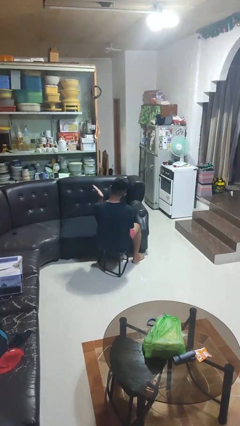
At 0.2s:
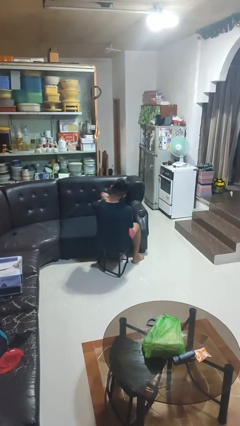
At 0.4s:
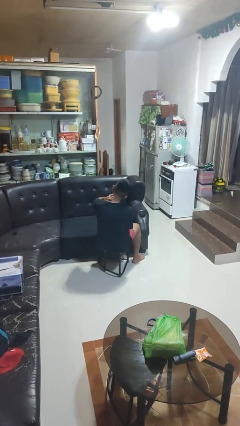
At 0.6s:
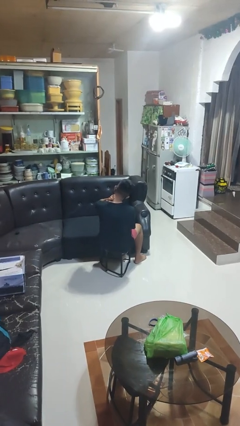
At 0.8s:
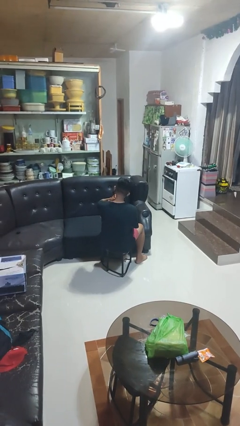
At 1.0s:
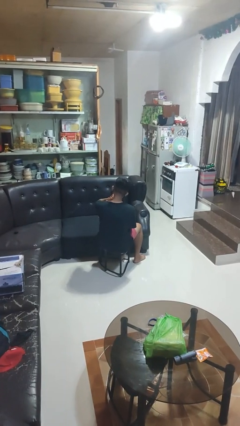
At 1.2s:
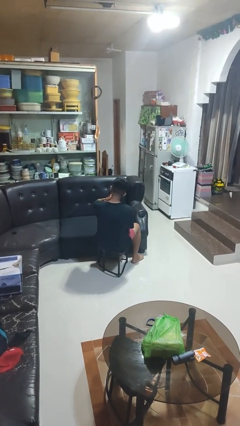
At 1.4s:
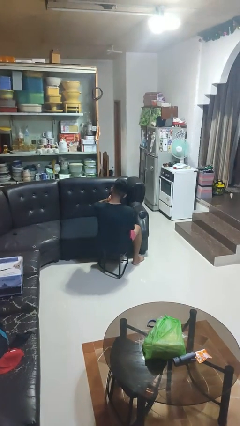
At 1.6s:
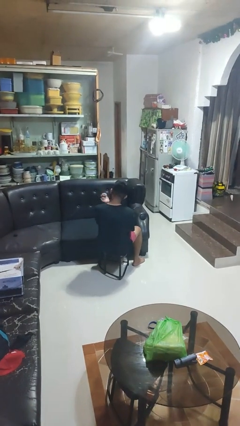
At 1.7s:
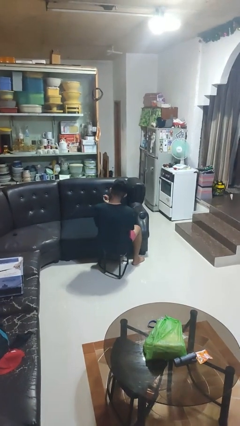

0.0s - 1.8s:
person swats bug

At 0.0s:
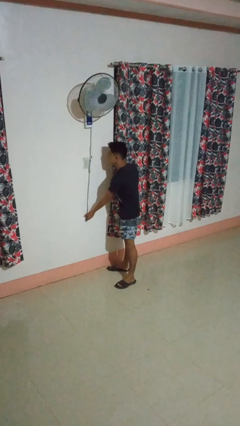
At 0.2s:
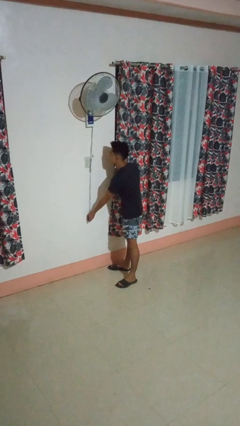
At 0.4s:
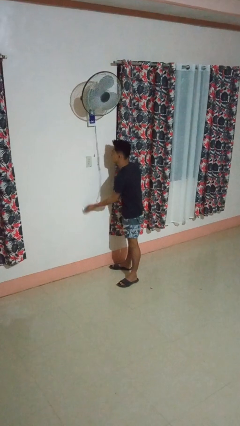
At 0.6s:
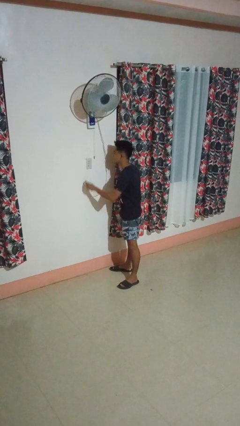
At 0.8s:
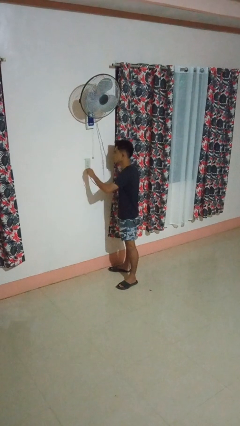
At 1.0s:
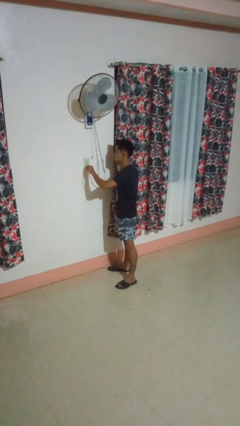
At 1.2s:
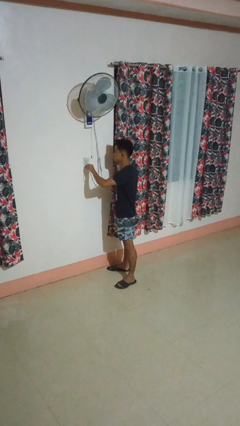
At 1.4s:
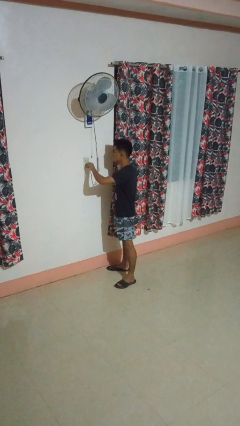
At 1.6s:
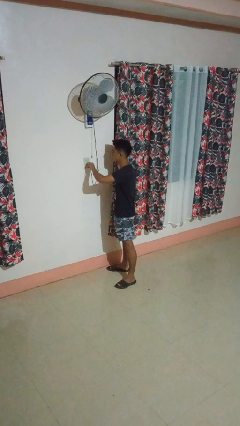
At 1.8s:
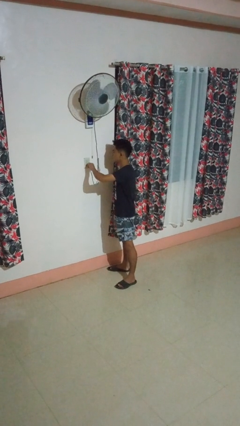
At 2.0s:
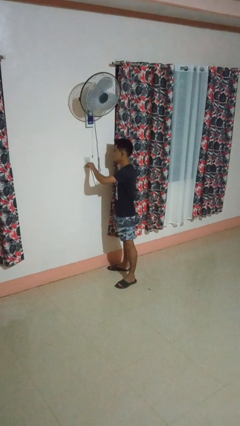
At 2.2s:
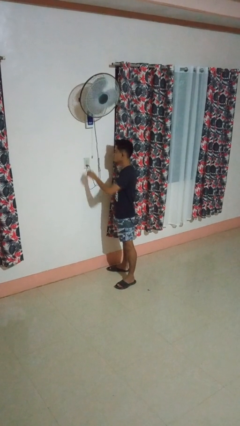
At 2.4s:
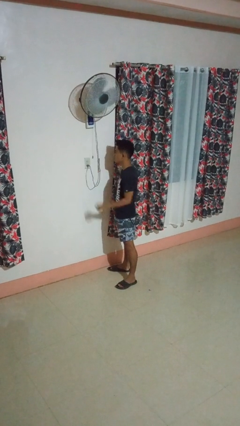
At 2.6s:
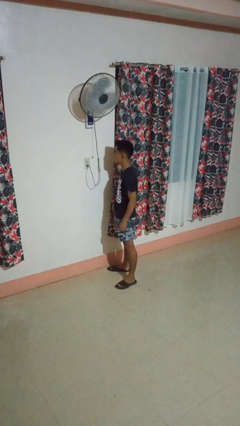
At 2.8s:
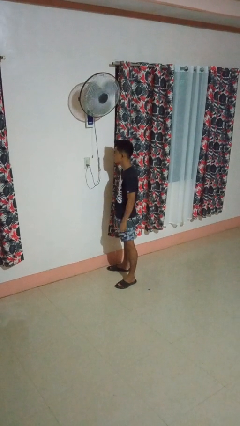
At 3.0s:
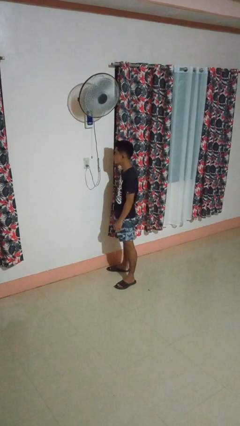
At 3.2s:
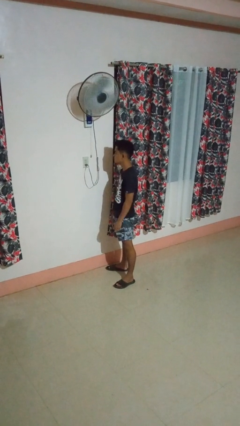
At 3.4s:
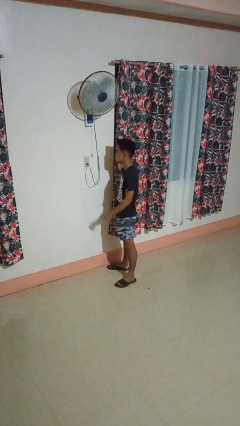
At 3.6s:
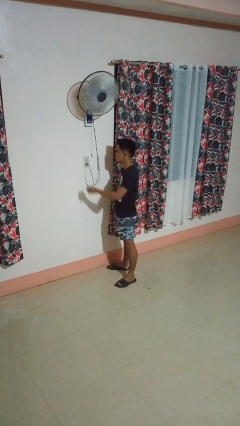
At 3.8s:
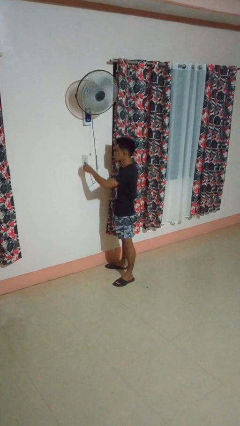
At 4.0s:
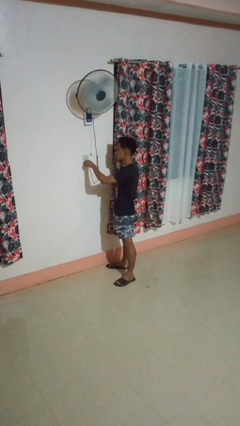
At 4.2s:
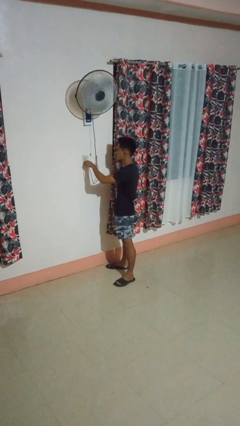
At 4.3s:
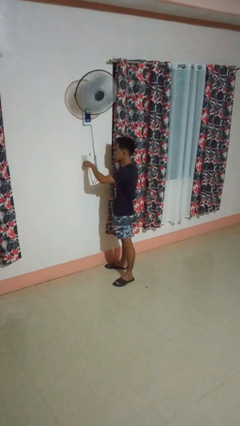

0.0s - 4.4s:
person plugs into electrical socket

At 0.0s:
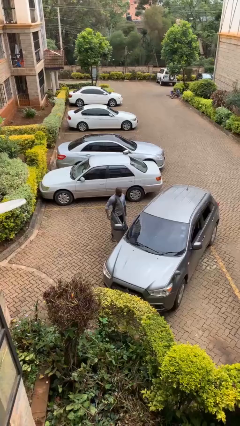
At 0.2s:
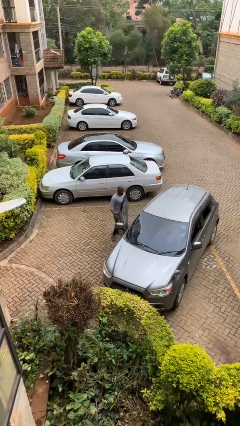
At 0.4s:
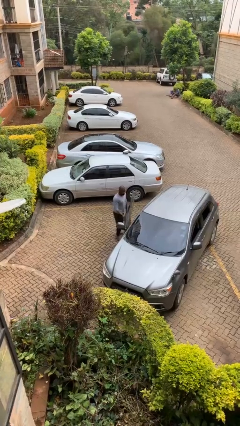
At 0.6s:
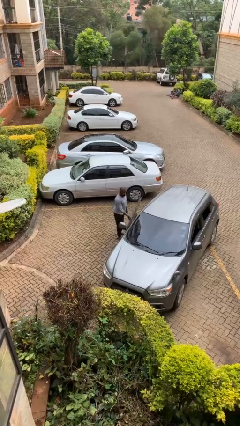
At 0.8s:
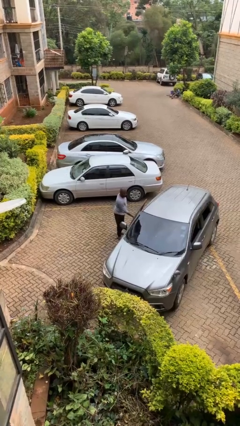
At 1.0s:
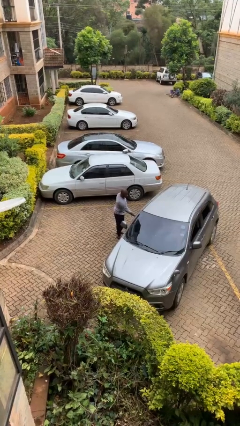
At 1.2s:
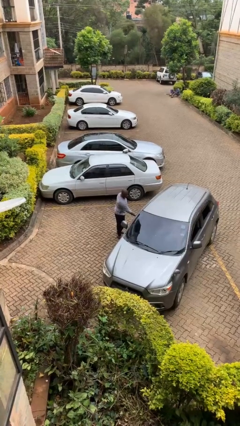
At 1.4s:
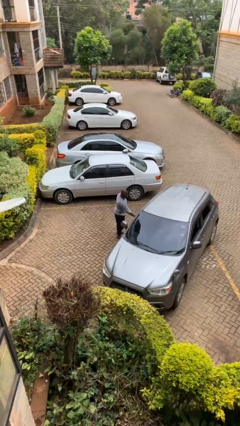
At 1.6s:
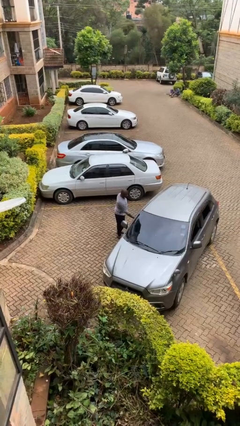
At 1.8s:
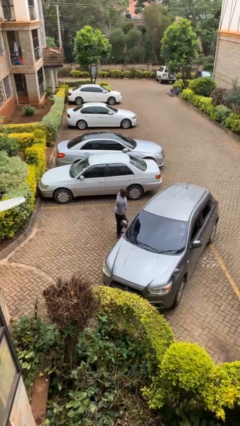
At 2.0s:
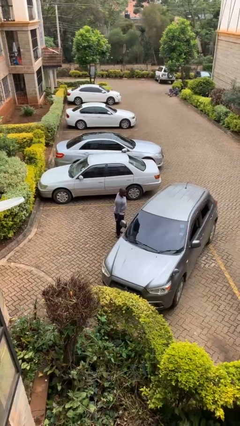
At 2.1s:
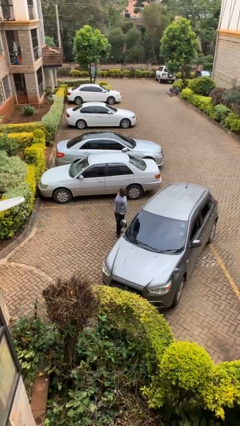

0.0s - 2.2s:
person closes car door

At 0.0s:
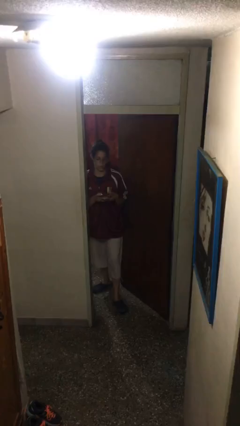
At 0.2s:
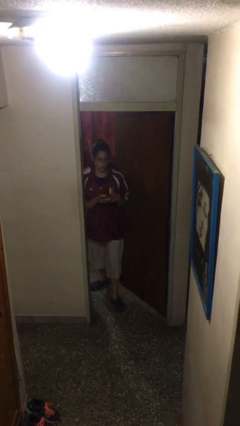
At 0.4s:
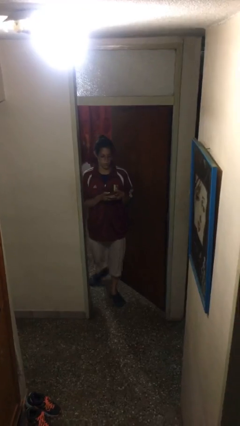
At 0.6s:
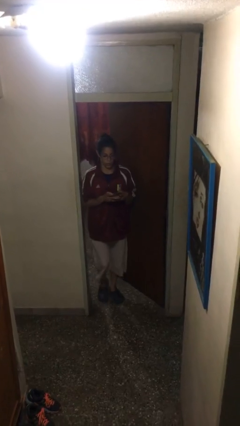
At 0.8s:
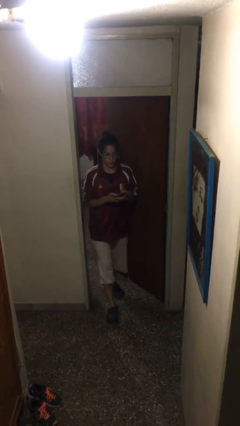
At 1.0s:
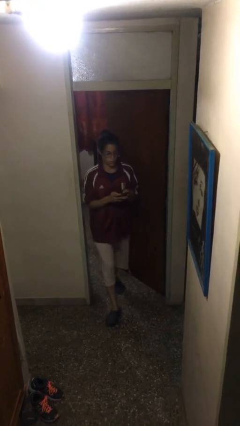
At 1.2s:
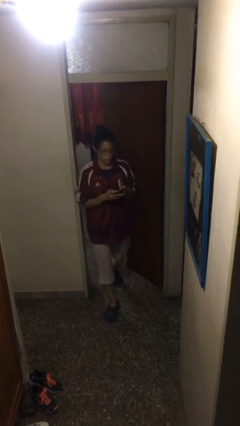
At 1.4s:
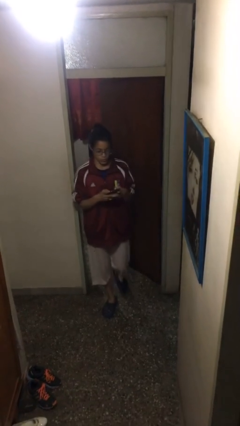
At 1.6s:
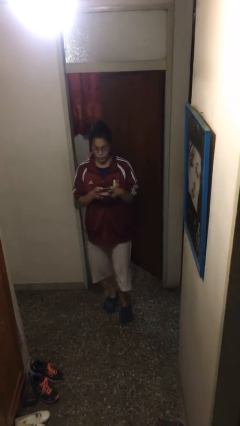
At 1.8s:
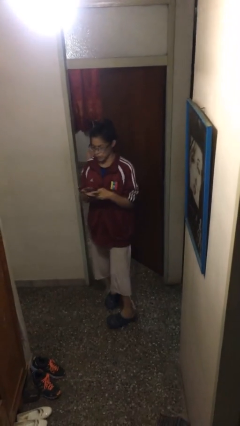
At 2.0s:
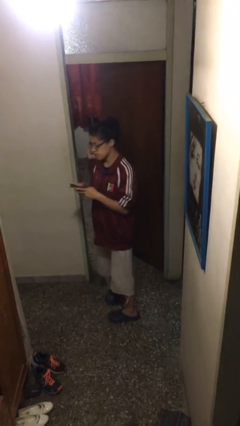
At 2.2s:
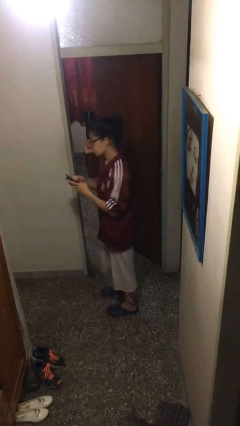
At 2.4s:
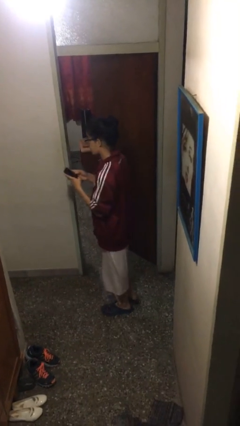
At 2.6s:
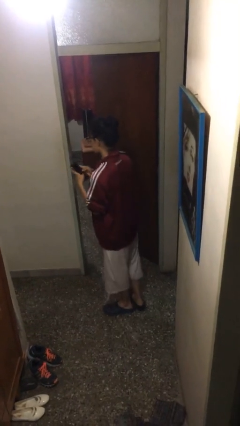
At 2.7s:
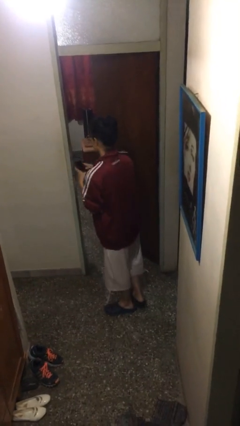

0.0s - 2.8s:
person enters scene through structure

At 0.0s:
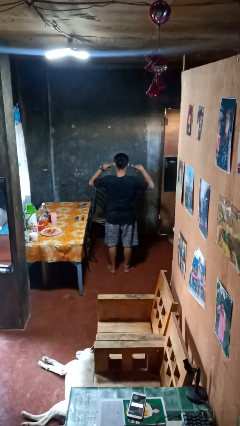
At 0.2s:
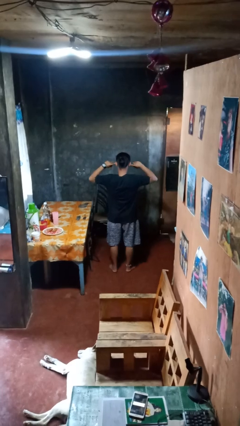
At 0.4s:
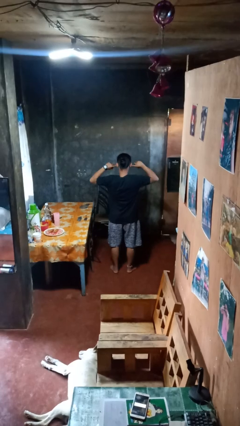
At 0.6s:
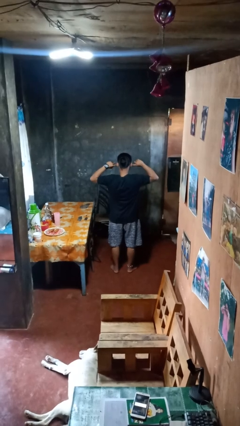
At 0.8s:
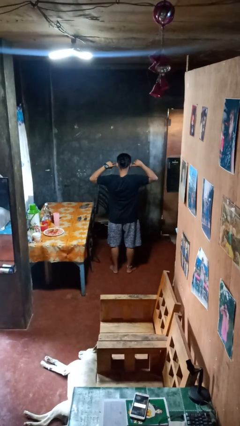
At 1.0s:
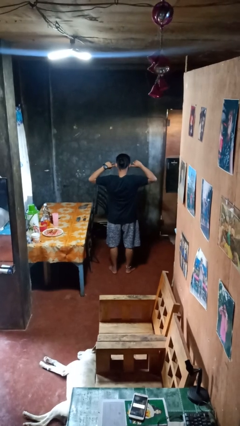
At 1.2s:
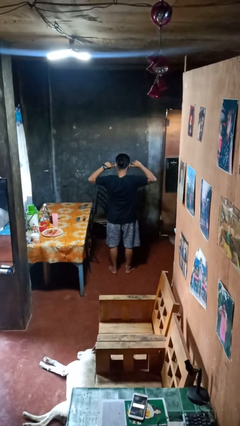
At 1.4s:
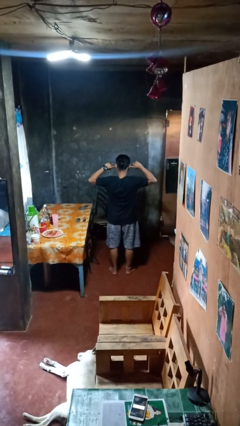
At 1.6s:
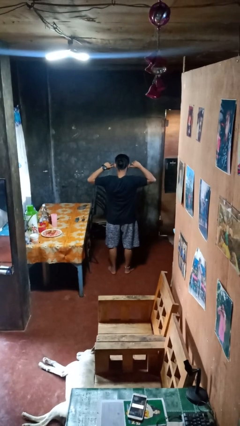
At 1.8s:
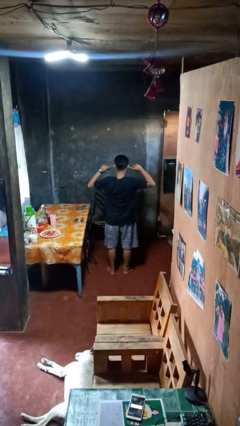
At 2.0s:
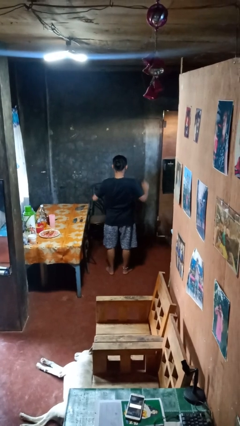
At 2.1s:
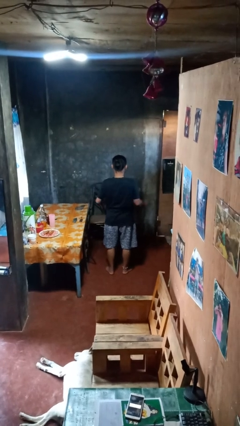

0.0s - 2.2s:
person puts fingers in ear

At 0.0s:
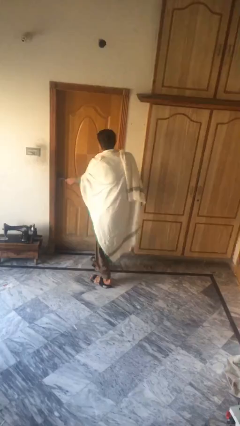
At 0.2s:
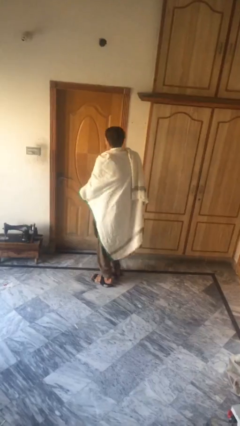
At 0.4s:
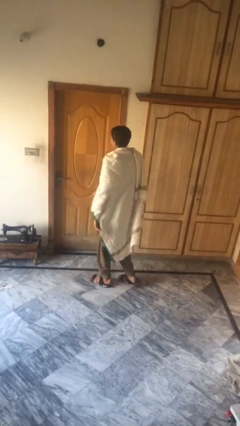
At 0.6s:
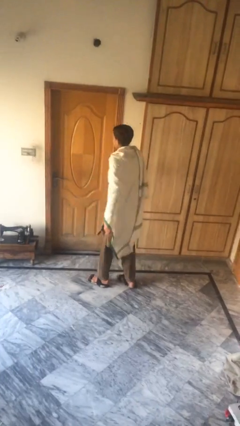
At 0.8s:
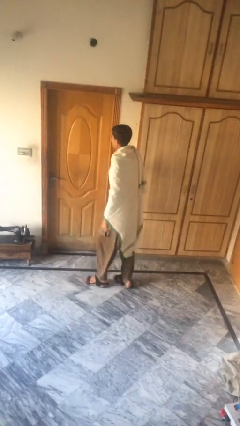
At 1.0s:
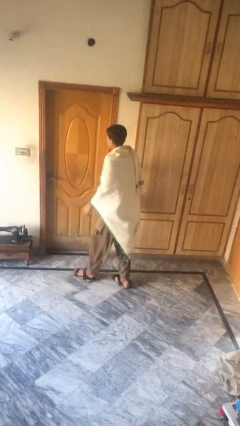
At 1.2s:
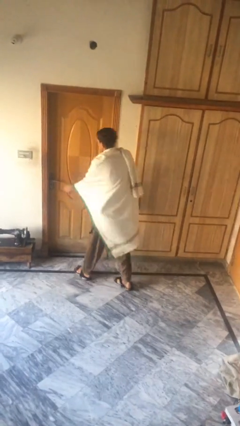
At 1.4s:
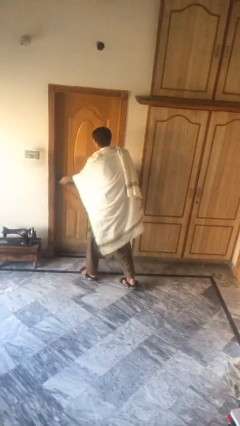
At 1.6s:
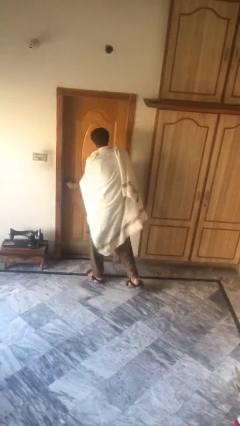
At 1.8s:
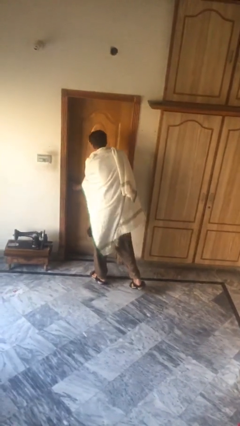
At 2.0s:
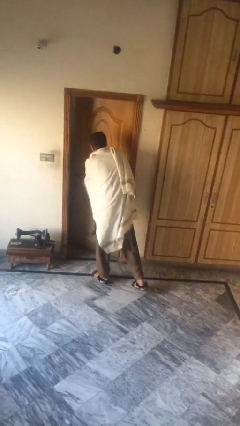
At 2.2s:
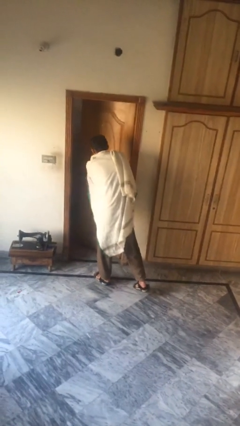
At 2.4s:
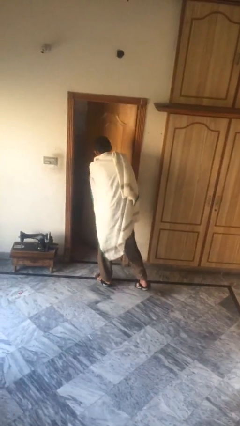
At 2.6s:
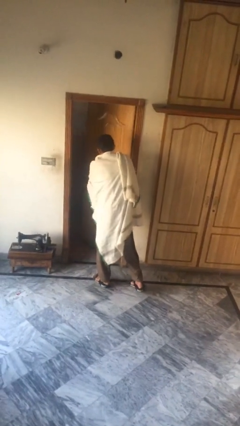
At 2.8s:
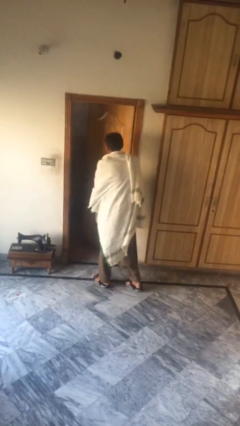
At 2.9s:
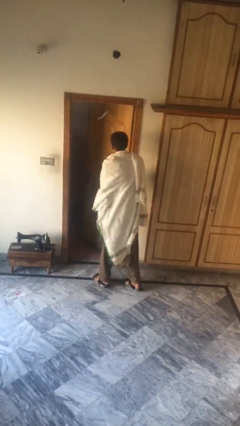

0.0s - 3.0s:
person opens facility door

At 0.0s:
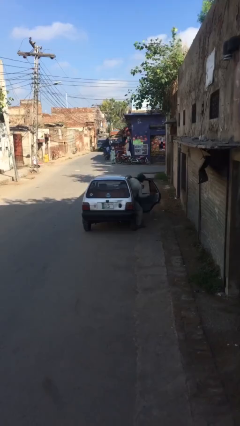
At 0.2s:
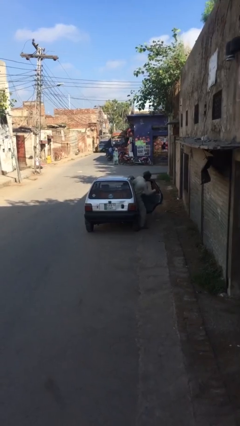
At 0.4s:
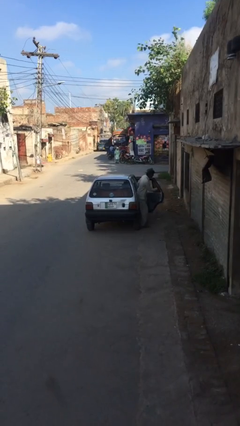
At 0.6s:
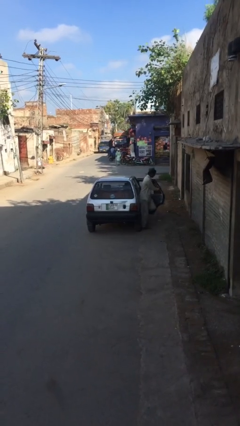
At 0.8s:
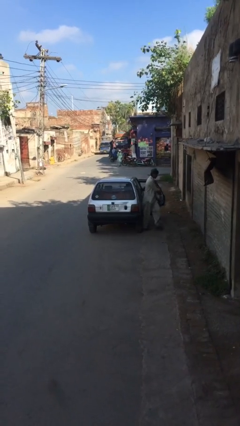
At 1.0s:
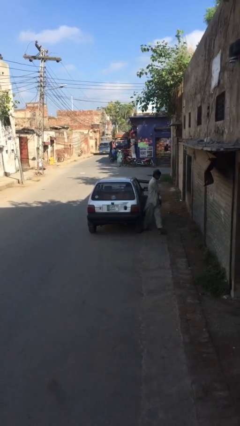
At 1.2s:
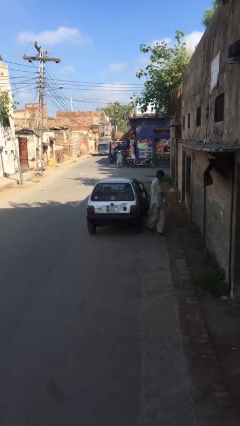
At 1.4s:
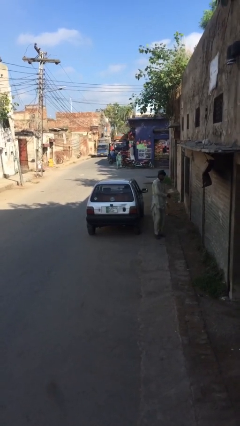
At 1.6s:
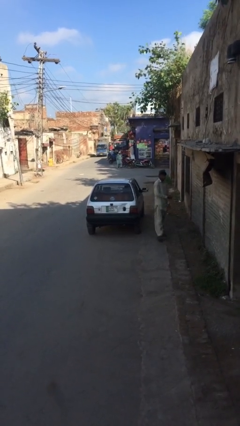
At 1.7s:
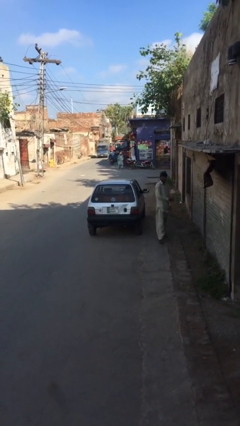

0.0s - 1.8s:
car drops off person
